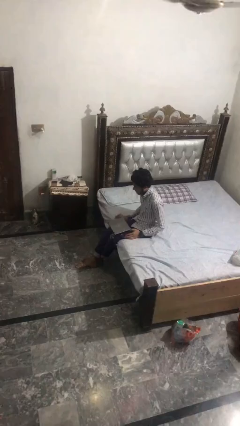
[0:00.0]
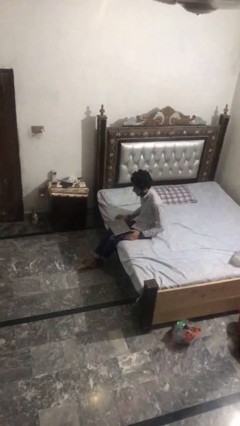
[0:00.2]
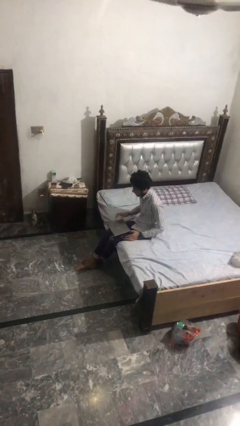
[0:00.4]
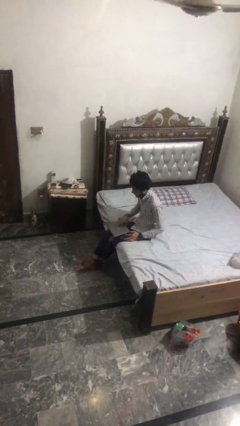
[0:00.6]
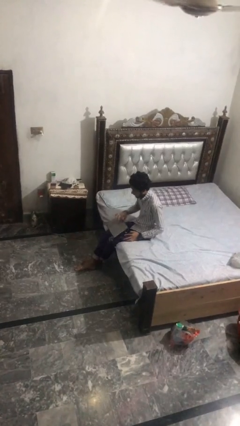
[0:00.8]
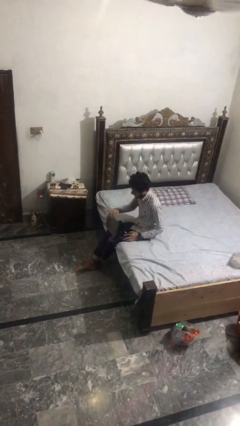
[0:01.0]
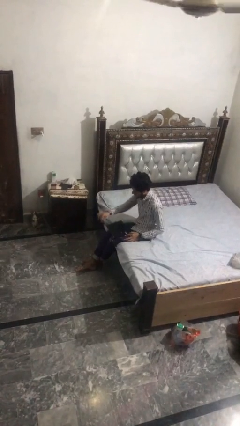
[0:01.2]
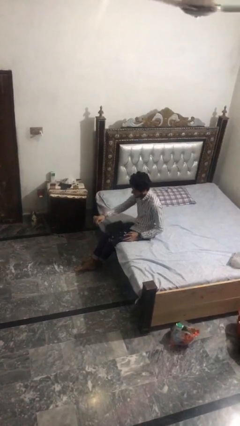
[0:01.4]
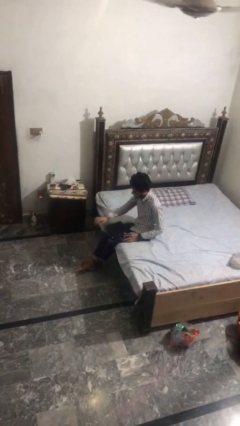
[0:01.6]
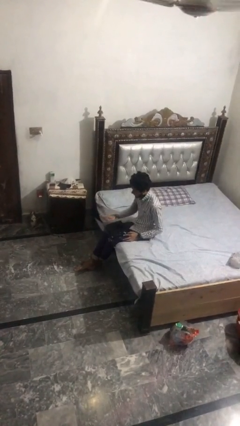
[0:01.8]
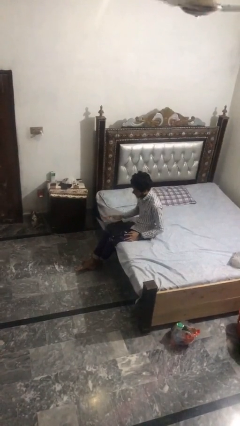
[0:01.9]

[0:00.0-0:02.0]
person opens laptop

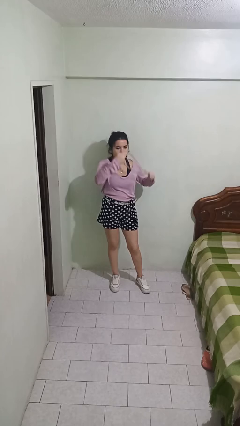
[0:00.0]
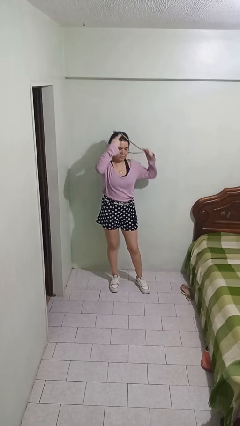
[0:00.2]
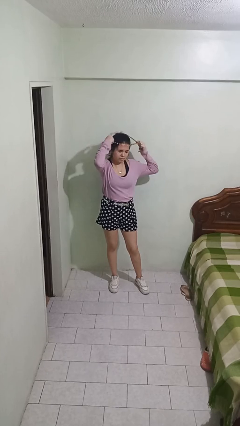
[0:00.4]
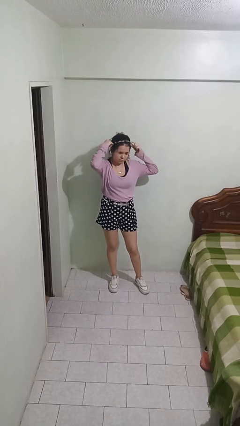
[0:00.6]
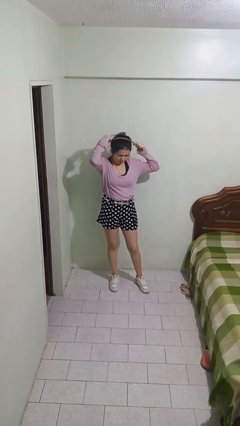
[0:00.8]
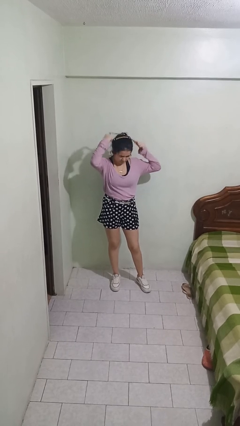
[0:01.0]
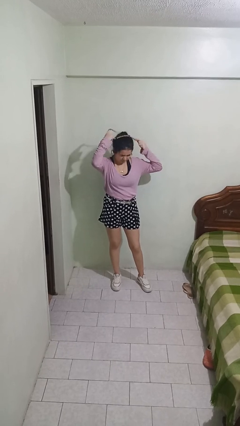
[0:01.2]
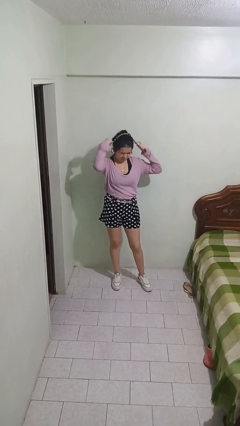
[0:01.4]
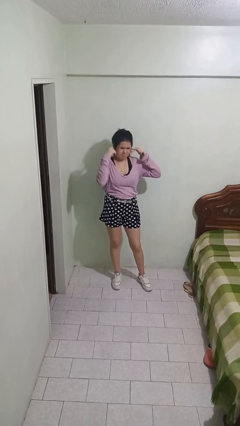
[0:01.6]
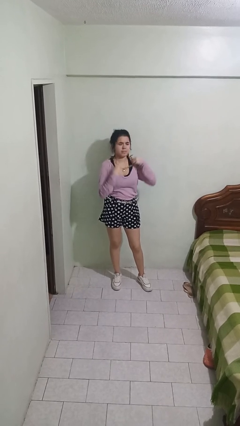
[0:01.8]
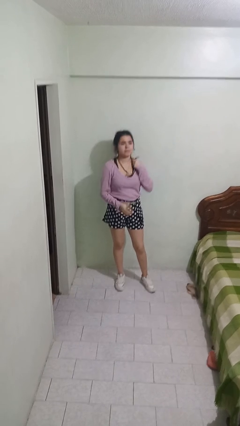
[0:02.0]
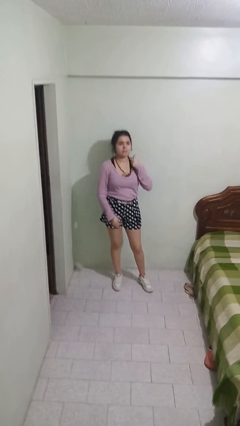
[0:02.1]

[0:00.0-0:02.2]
person puts on necklace

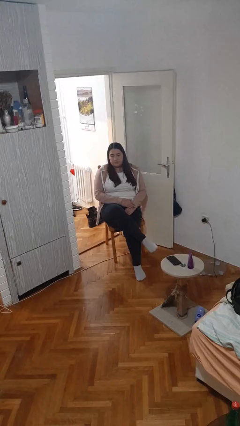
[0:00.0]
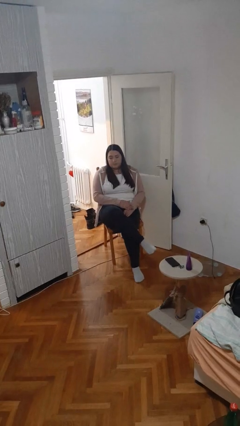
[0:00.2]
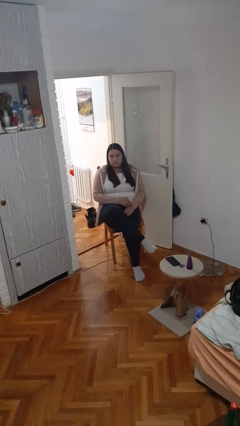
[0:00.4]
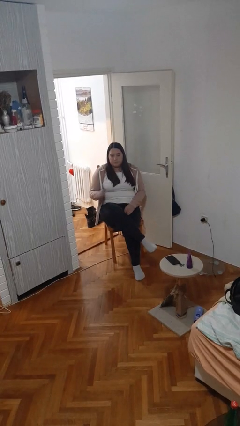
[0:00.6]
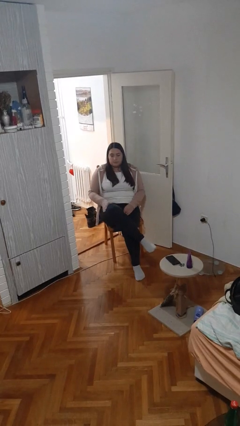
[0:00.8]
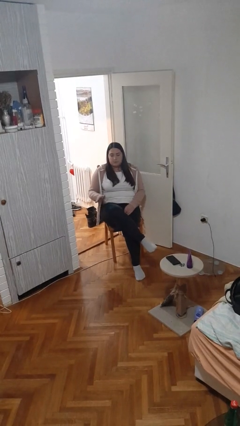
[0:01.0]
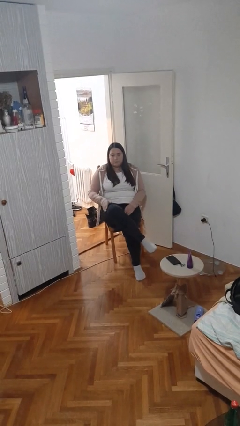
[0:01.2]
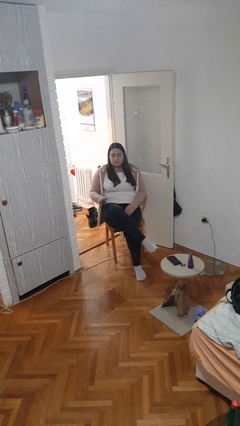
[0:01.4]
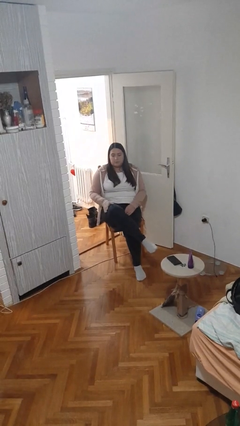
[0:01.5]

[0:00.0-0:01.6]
person slaps hands on thighs

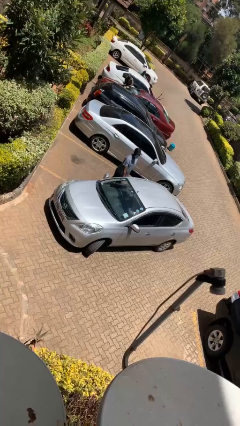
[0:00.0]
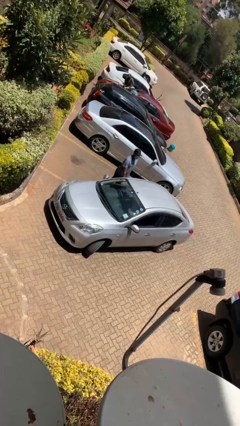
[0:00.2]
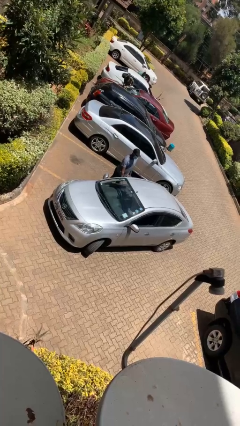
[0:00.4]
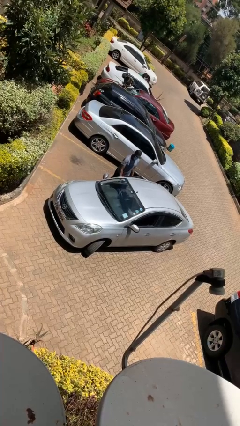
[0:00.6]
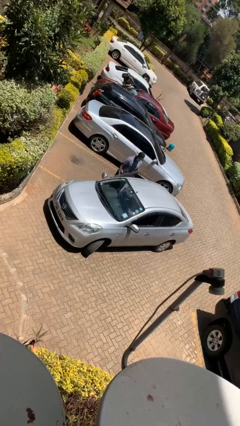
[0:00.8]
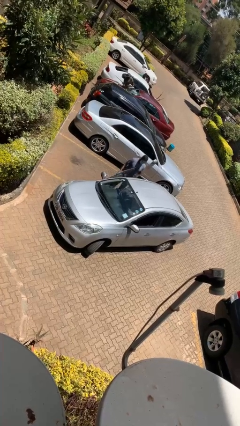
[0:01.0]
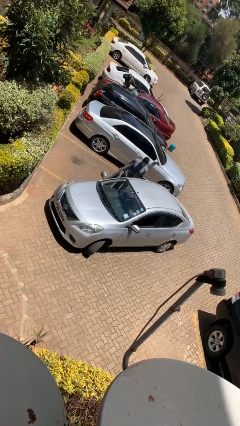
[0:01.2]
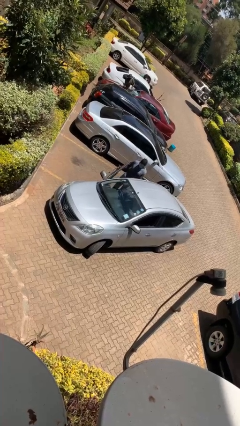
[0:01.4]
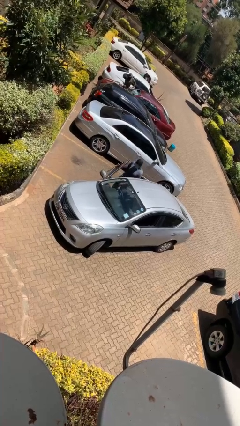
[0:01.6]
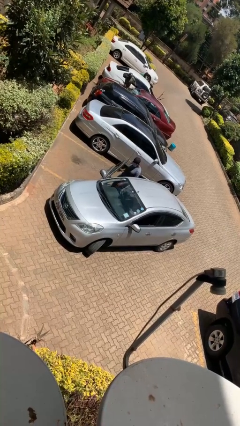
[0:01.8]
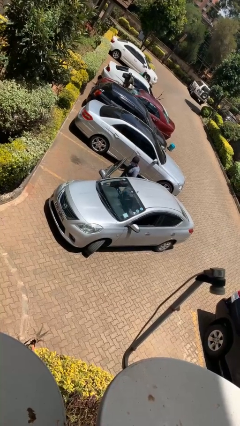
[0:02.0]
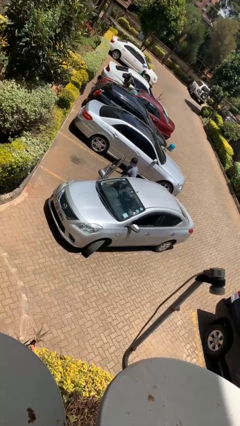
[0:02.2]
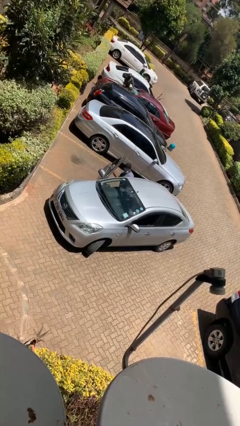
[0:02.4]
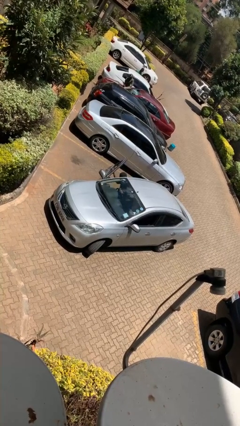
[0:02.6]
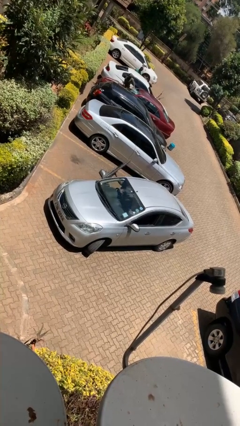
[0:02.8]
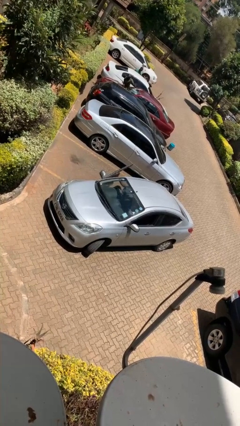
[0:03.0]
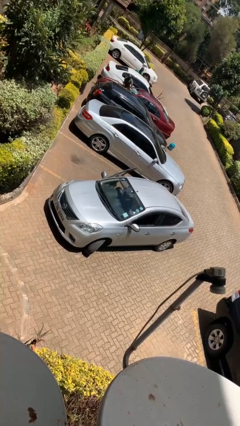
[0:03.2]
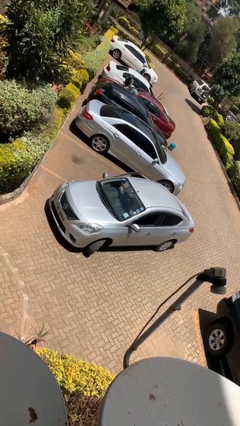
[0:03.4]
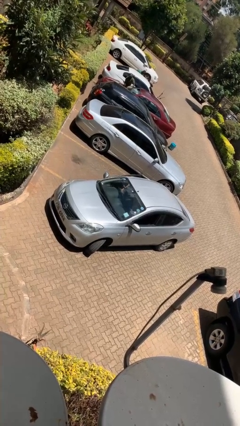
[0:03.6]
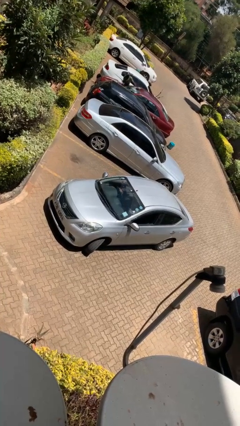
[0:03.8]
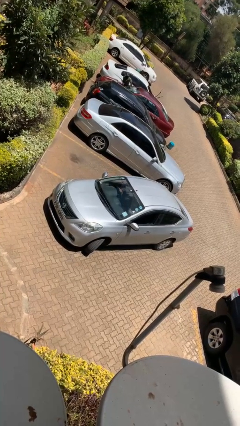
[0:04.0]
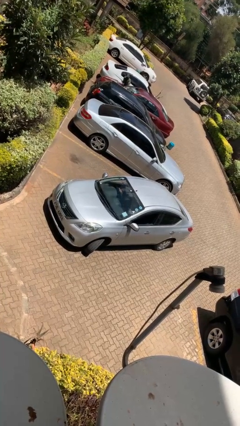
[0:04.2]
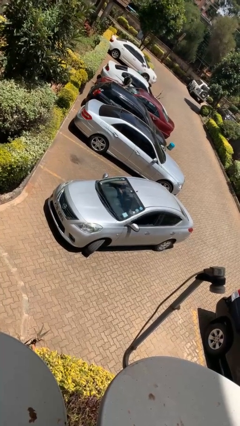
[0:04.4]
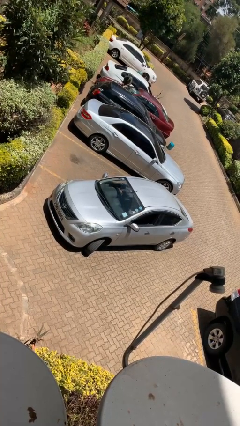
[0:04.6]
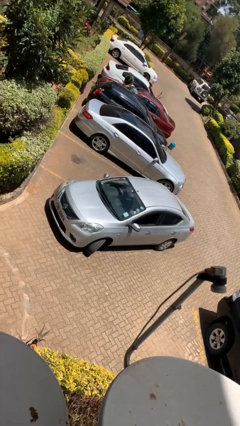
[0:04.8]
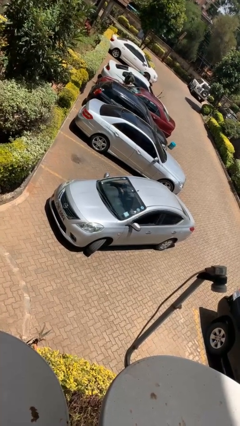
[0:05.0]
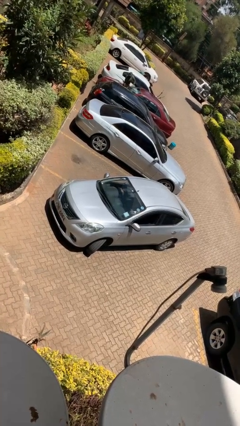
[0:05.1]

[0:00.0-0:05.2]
car picks up person

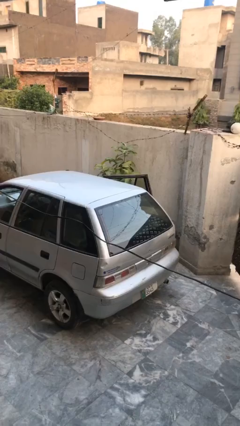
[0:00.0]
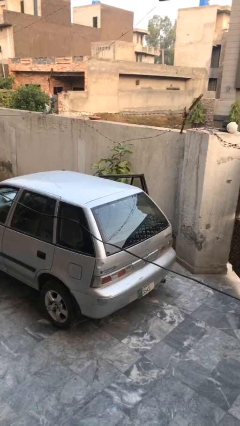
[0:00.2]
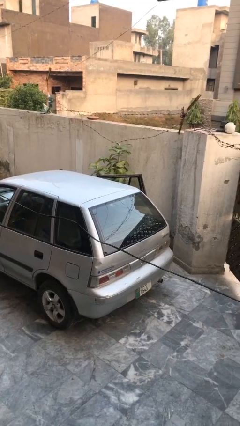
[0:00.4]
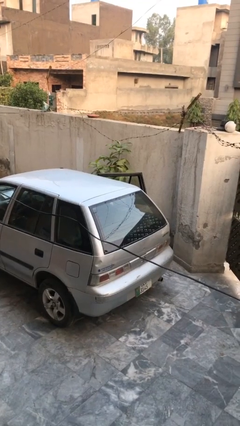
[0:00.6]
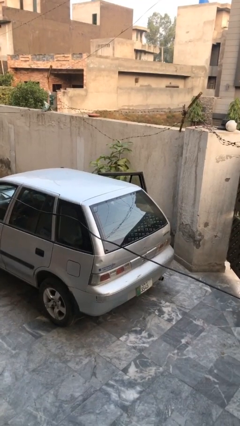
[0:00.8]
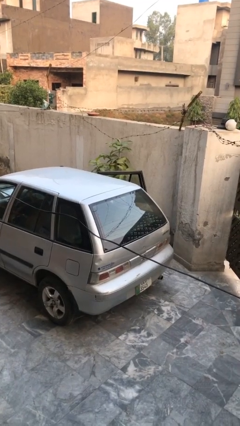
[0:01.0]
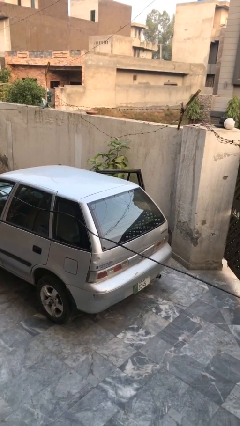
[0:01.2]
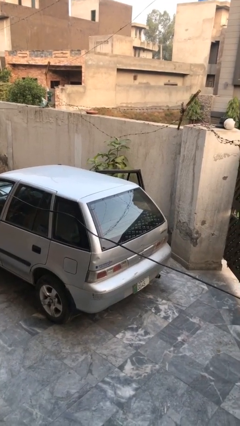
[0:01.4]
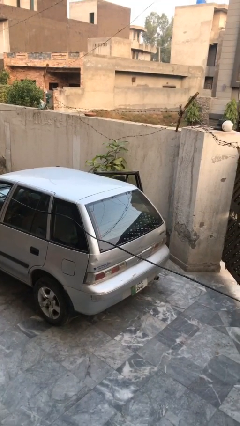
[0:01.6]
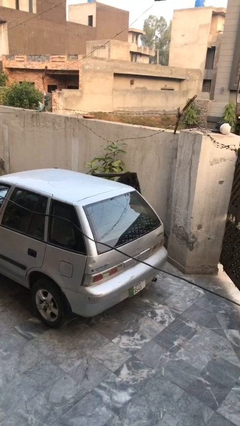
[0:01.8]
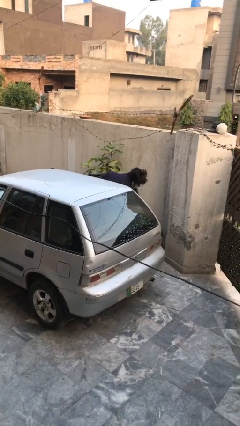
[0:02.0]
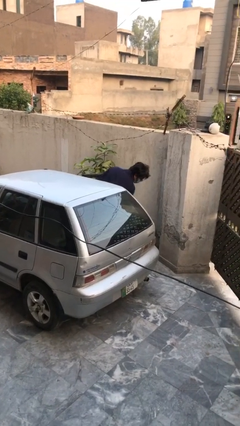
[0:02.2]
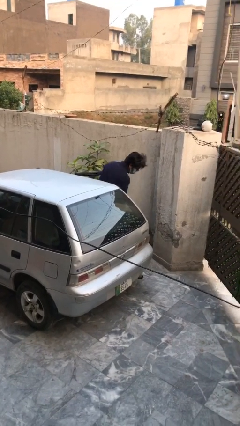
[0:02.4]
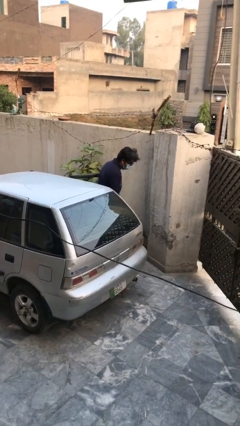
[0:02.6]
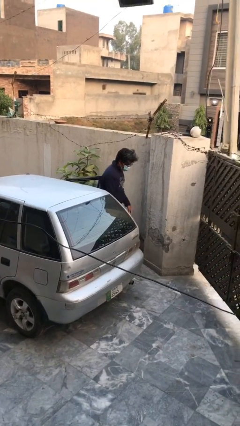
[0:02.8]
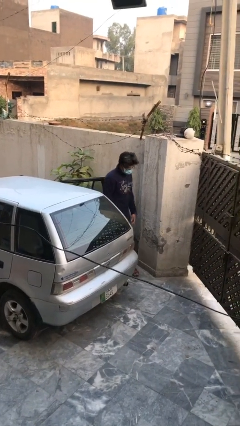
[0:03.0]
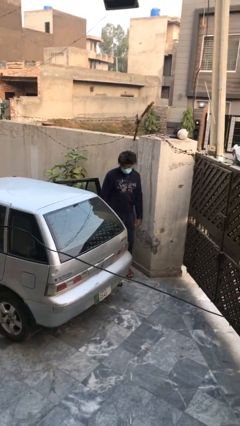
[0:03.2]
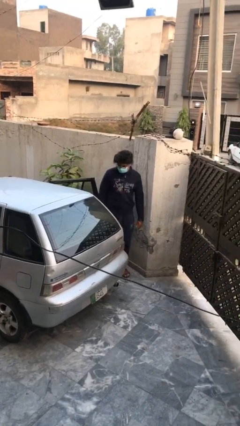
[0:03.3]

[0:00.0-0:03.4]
person exits car

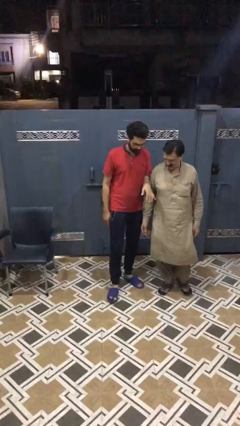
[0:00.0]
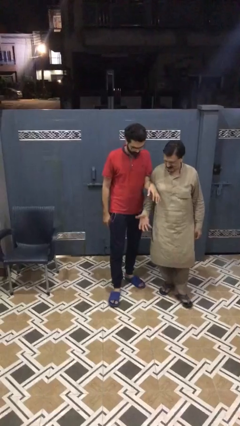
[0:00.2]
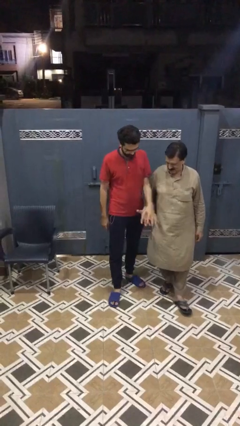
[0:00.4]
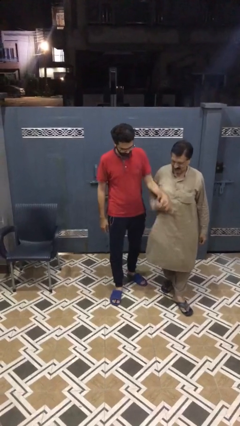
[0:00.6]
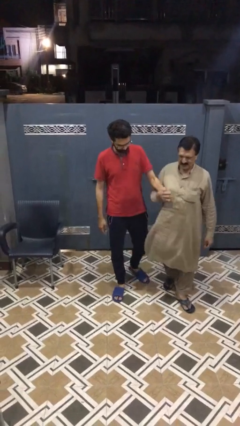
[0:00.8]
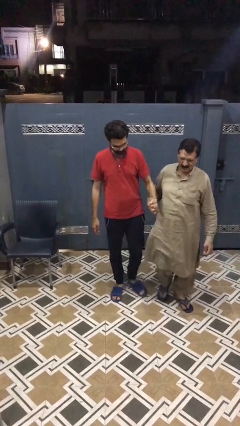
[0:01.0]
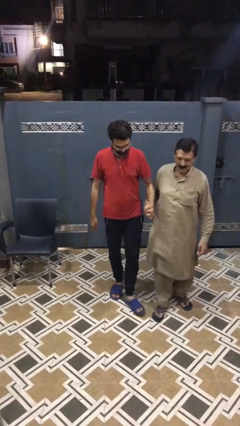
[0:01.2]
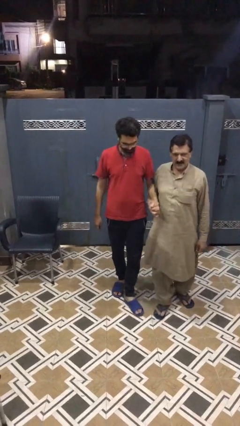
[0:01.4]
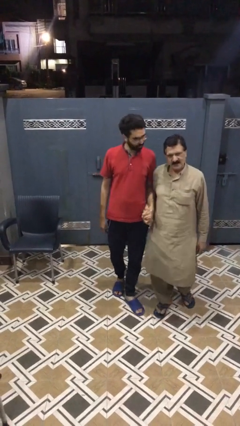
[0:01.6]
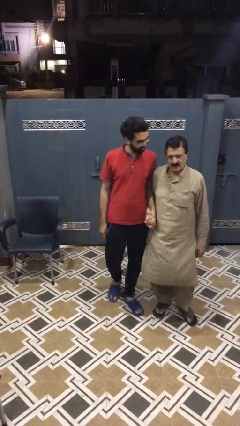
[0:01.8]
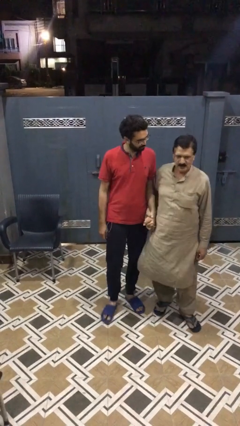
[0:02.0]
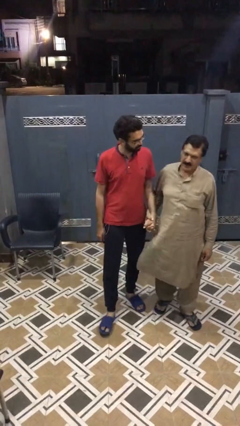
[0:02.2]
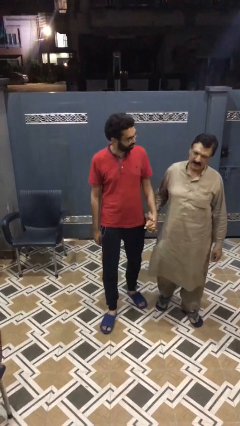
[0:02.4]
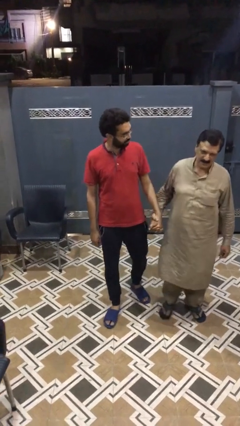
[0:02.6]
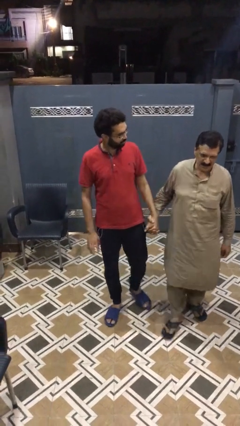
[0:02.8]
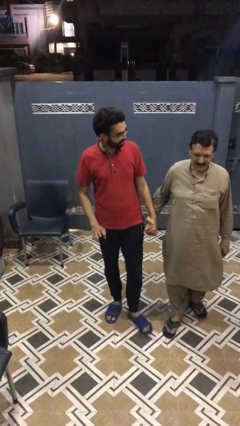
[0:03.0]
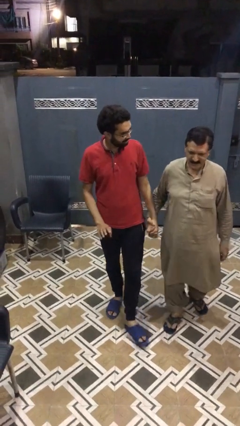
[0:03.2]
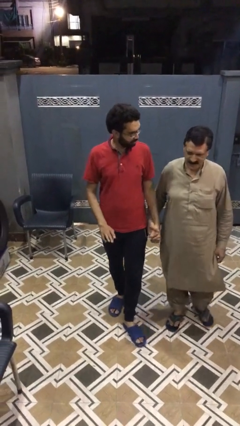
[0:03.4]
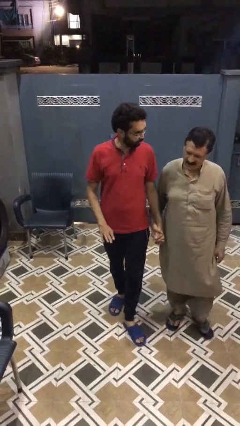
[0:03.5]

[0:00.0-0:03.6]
person holds hand
